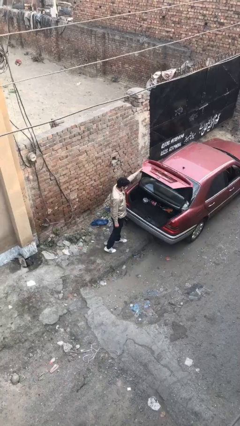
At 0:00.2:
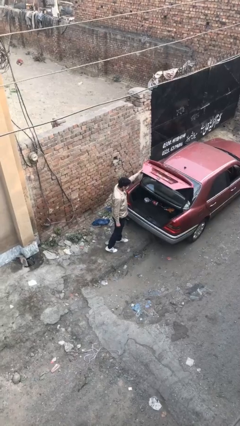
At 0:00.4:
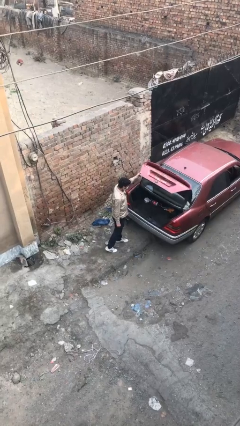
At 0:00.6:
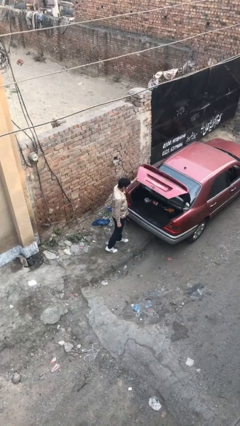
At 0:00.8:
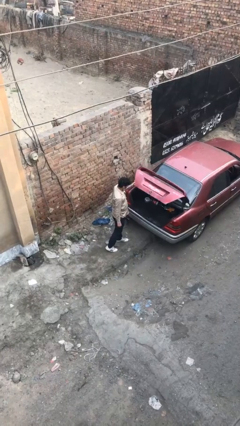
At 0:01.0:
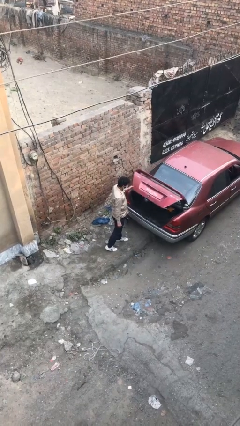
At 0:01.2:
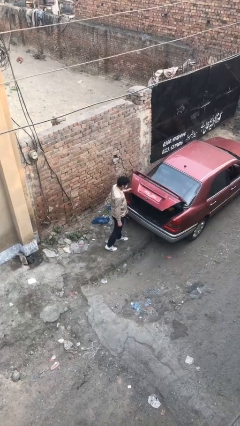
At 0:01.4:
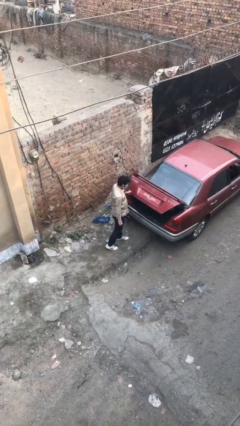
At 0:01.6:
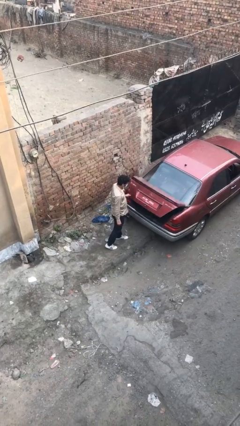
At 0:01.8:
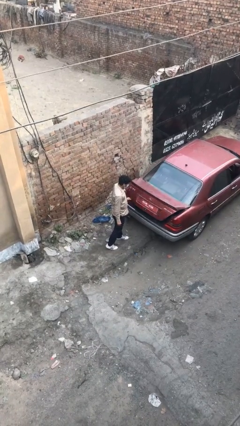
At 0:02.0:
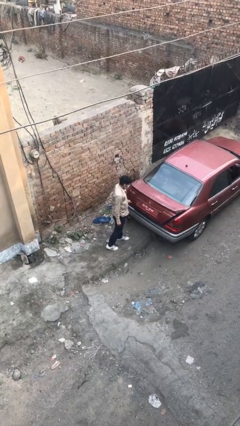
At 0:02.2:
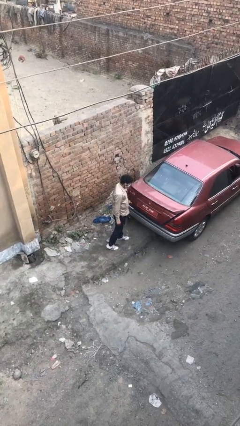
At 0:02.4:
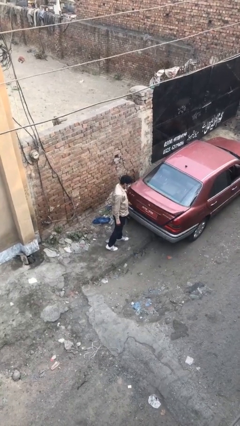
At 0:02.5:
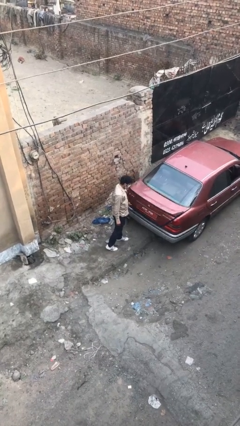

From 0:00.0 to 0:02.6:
person closes car trunk

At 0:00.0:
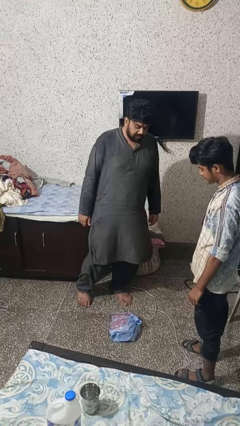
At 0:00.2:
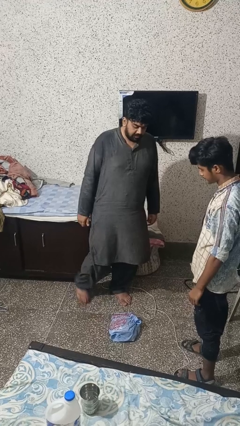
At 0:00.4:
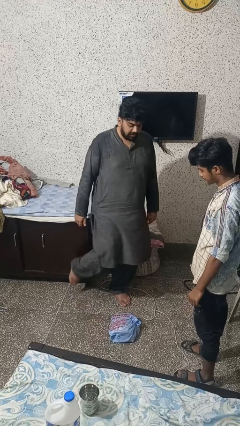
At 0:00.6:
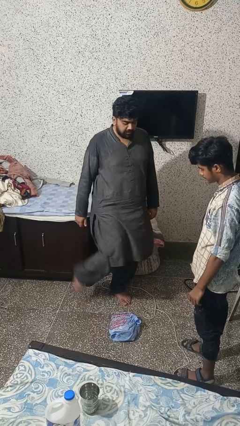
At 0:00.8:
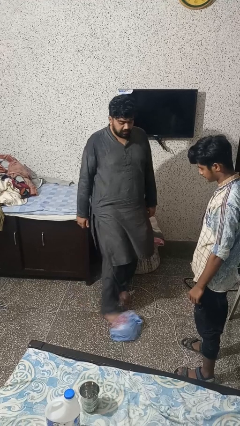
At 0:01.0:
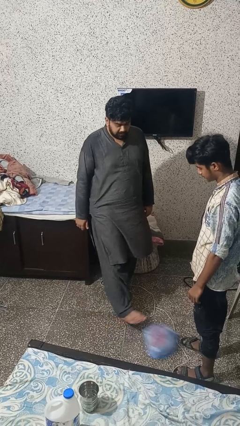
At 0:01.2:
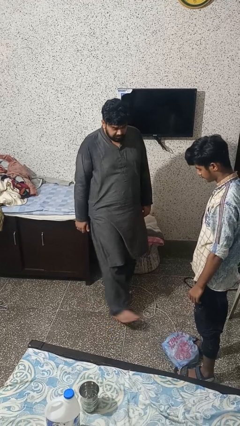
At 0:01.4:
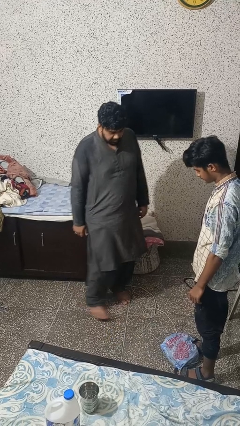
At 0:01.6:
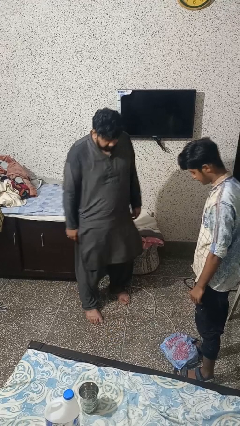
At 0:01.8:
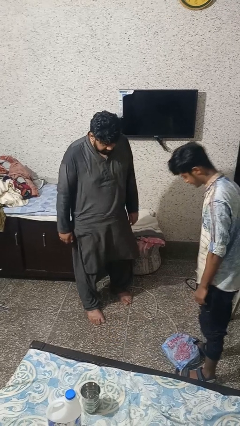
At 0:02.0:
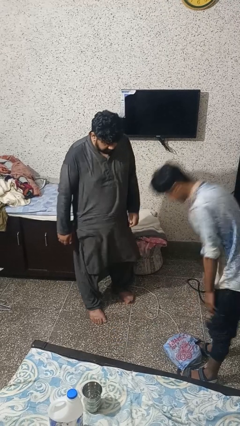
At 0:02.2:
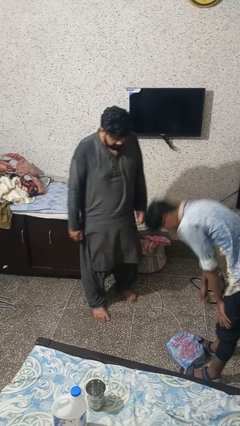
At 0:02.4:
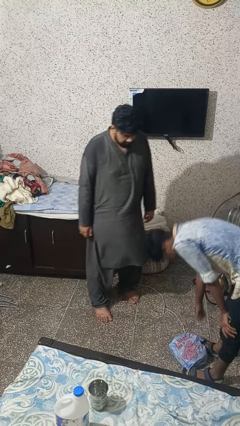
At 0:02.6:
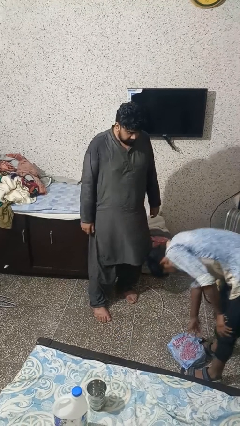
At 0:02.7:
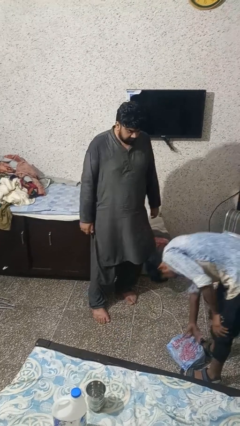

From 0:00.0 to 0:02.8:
person kicks object to person

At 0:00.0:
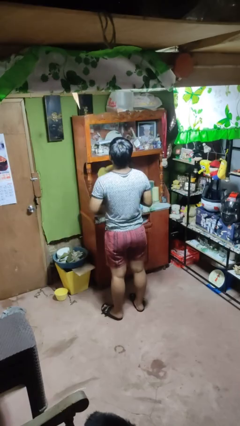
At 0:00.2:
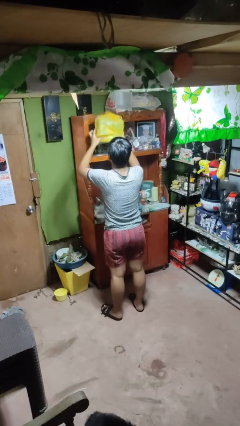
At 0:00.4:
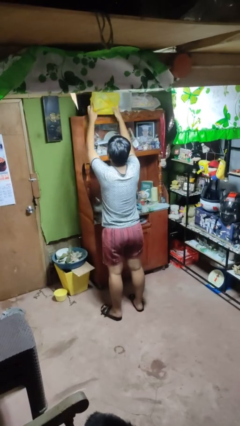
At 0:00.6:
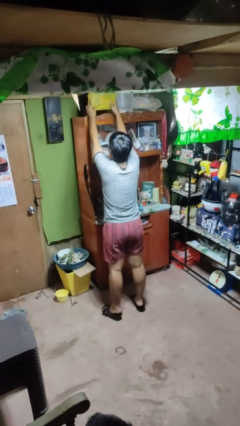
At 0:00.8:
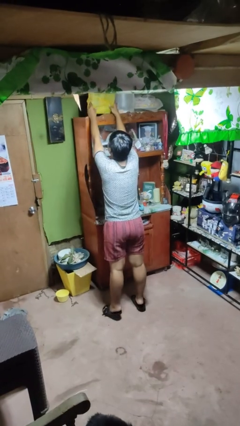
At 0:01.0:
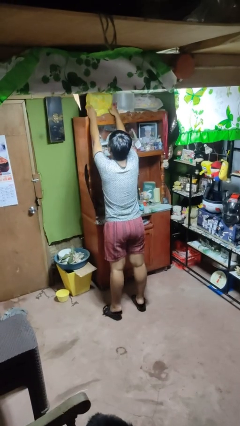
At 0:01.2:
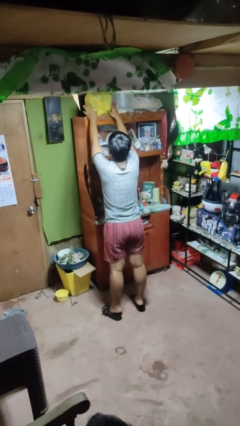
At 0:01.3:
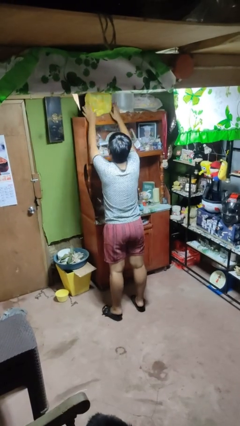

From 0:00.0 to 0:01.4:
person puts down object on shelf

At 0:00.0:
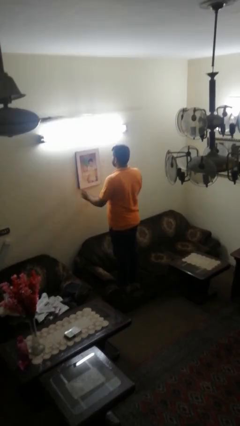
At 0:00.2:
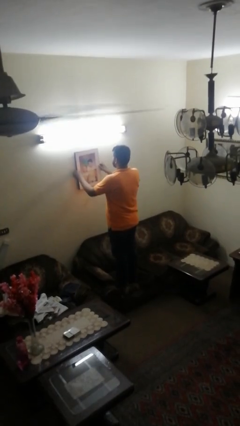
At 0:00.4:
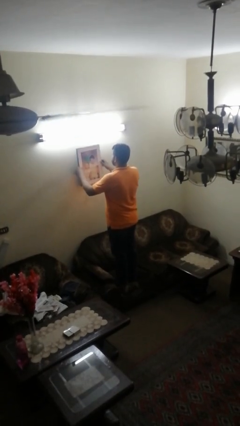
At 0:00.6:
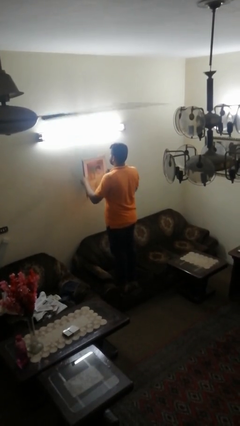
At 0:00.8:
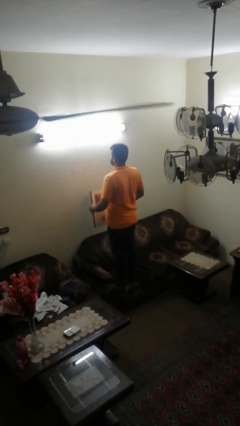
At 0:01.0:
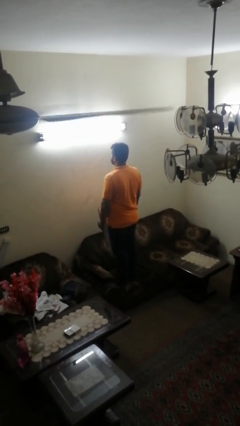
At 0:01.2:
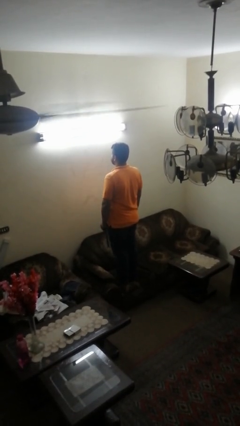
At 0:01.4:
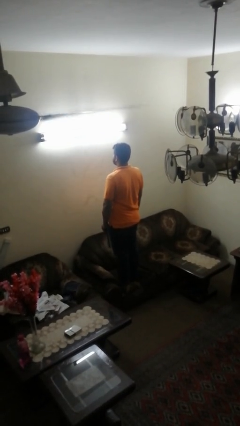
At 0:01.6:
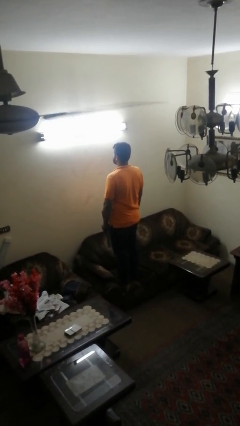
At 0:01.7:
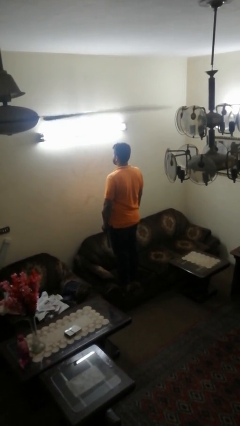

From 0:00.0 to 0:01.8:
person takes down picture frame

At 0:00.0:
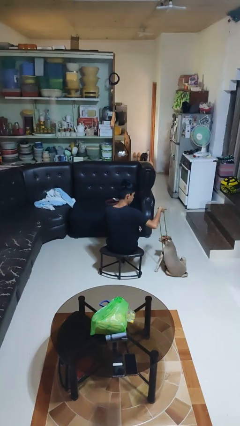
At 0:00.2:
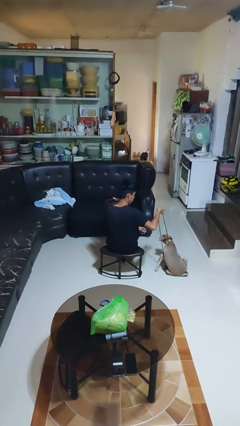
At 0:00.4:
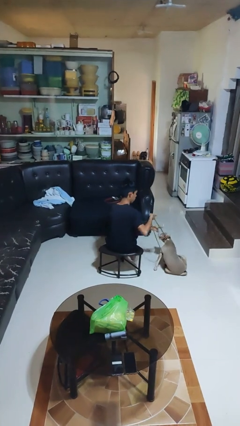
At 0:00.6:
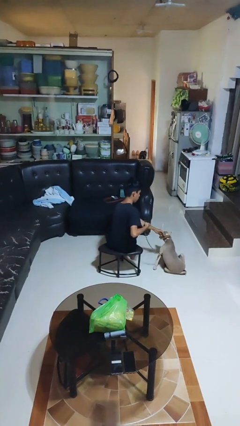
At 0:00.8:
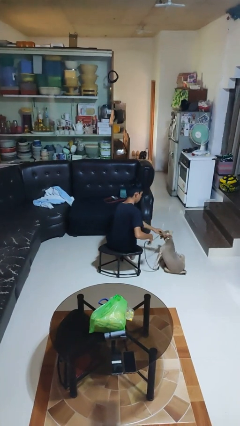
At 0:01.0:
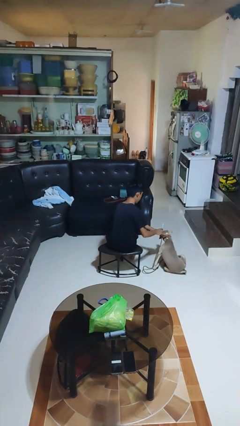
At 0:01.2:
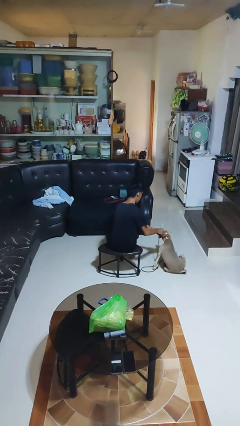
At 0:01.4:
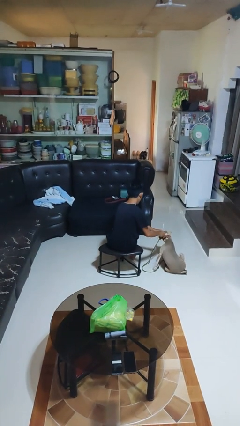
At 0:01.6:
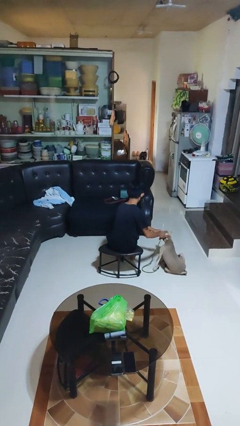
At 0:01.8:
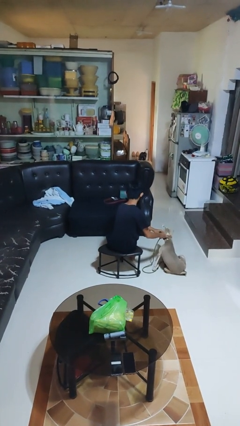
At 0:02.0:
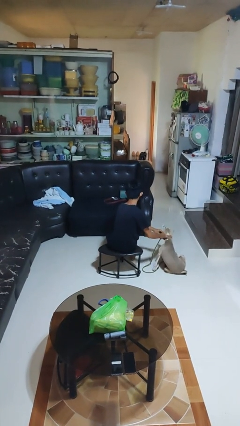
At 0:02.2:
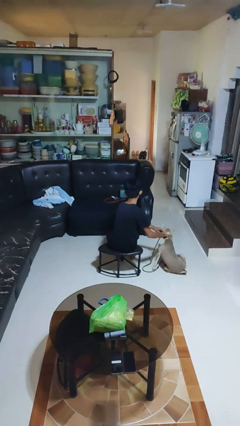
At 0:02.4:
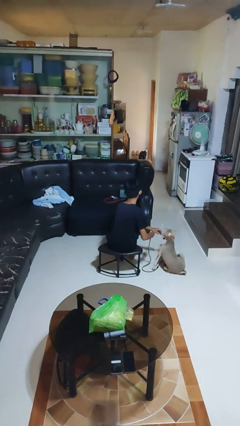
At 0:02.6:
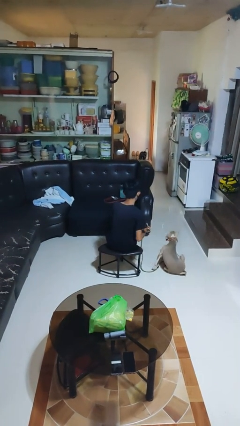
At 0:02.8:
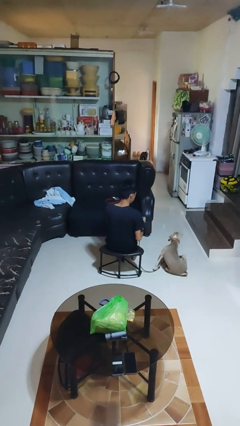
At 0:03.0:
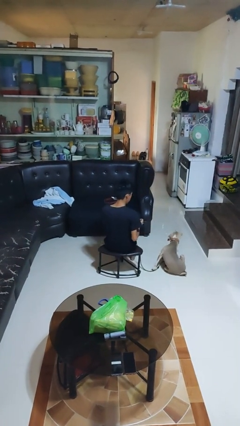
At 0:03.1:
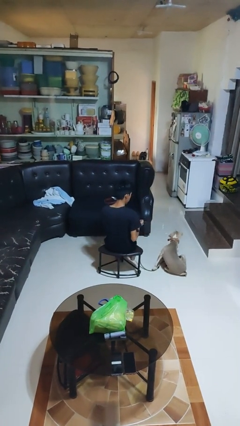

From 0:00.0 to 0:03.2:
person unattaches leash from dog

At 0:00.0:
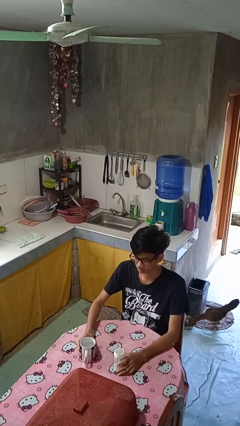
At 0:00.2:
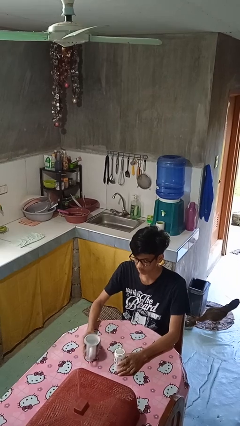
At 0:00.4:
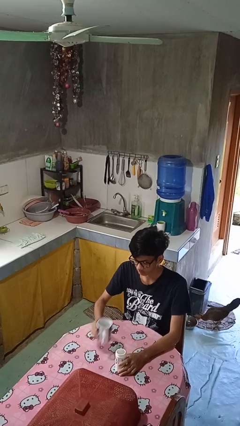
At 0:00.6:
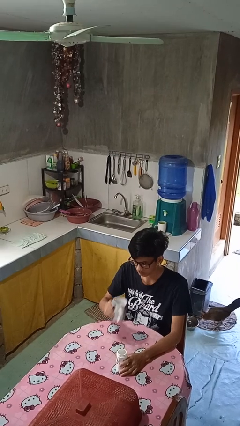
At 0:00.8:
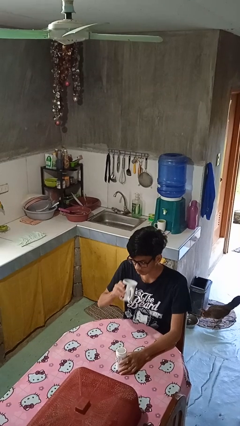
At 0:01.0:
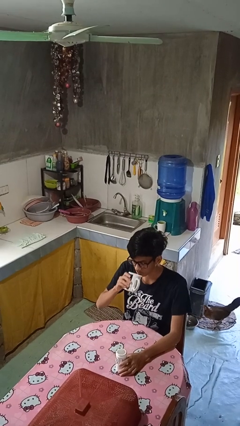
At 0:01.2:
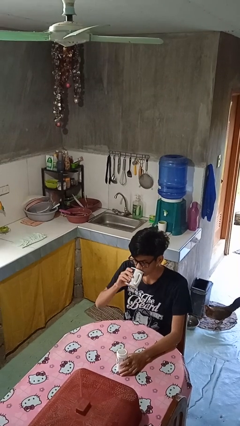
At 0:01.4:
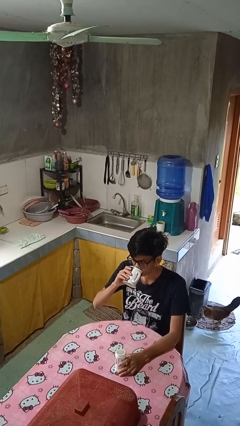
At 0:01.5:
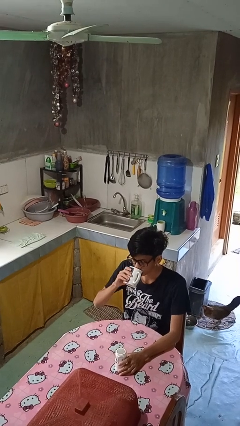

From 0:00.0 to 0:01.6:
person drinks from cup

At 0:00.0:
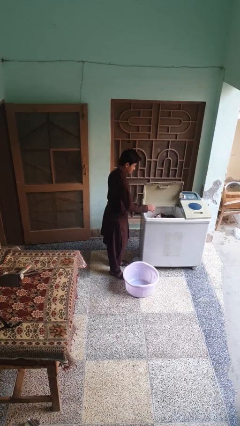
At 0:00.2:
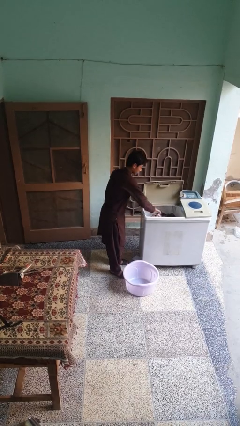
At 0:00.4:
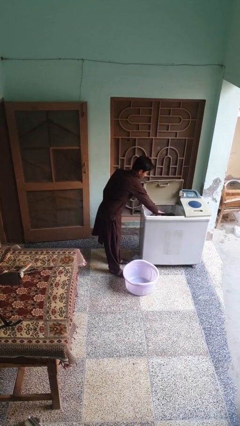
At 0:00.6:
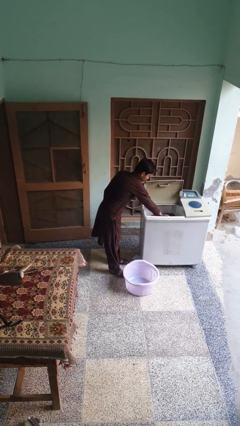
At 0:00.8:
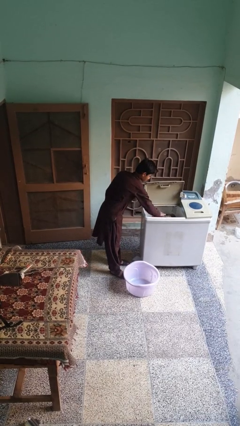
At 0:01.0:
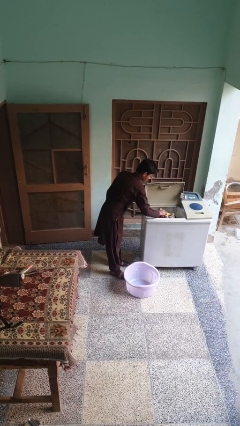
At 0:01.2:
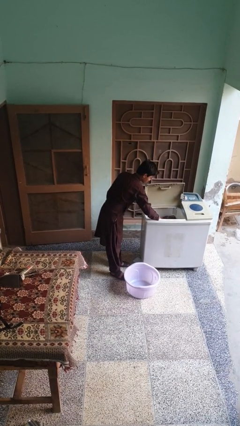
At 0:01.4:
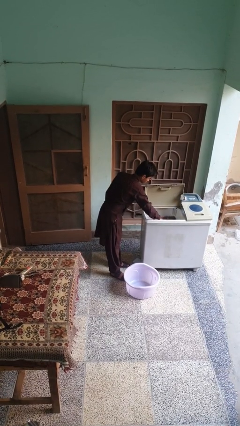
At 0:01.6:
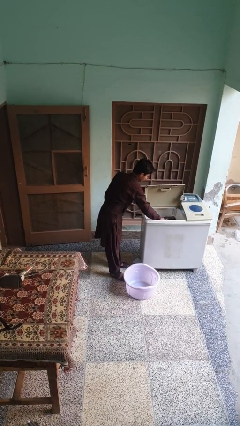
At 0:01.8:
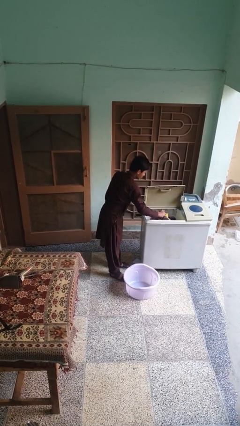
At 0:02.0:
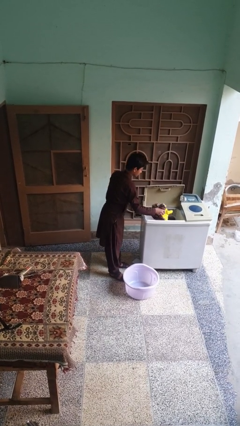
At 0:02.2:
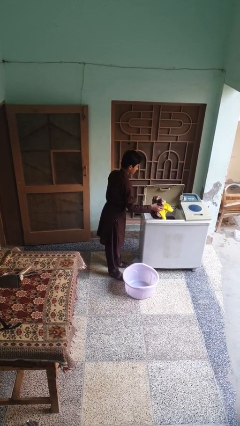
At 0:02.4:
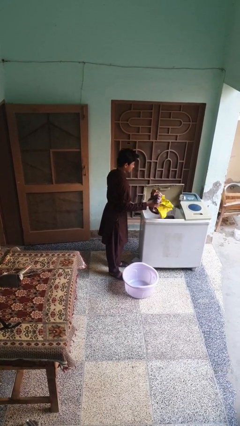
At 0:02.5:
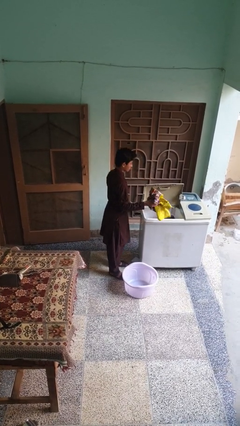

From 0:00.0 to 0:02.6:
person loads clotheswasher

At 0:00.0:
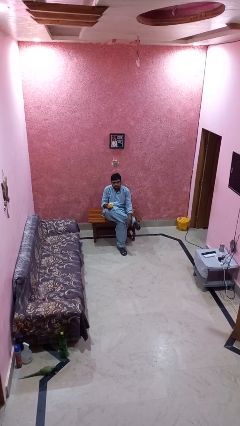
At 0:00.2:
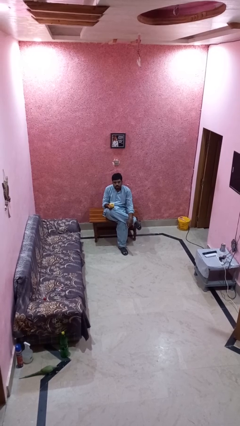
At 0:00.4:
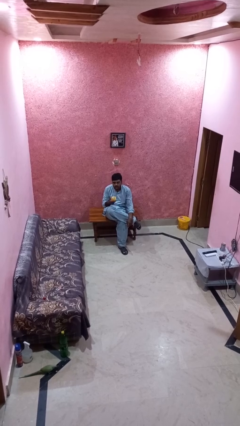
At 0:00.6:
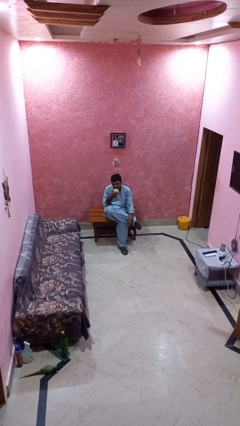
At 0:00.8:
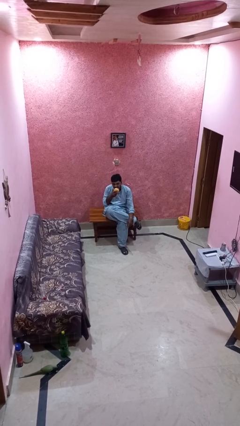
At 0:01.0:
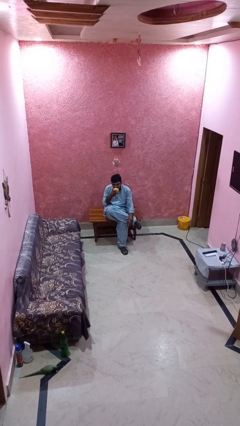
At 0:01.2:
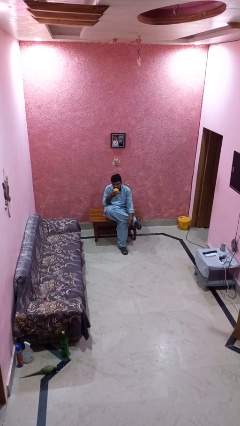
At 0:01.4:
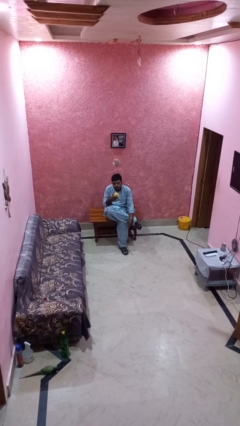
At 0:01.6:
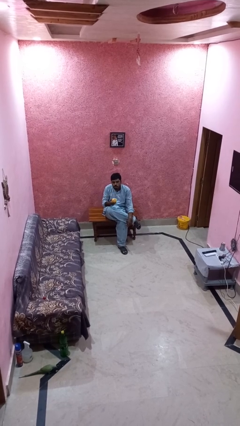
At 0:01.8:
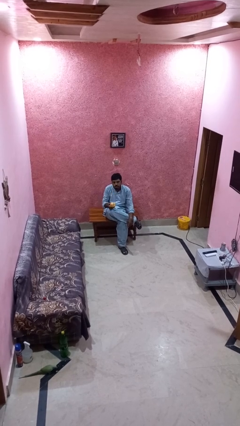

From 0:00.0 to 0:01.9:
person eats apple
